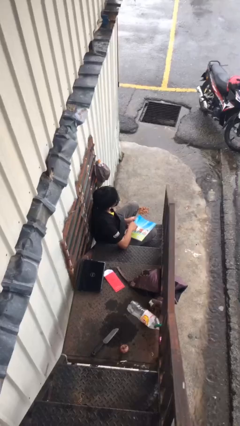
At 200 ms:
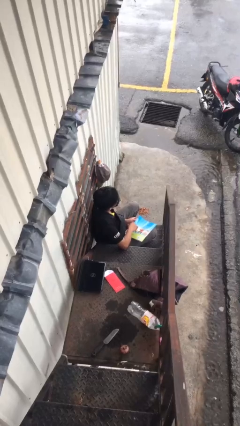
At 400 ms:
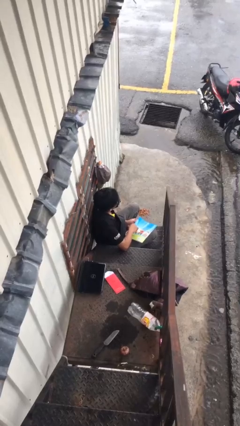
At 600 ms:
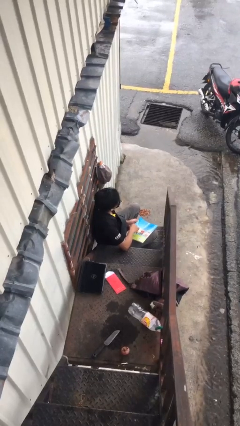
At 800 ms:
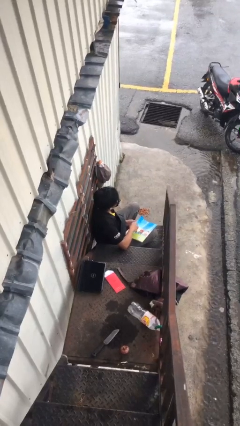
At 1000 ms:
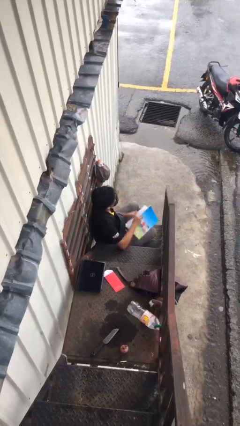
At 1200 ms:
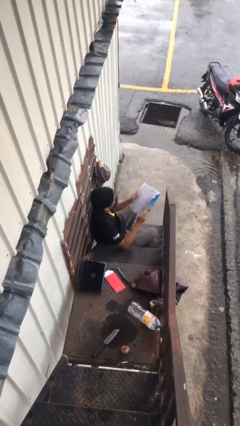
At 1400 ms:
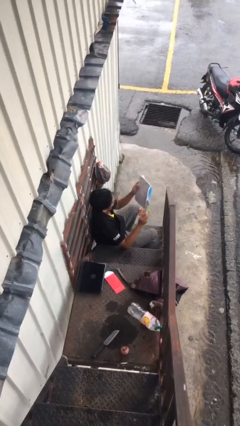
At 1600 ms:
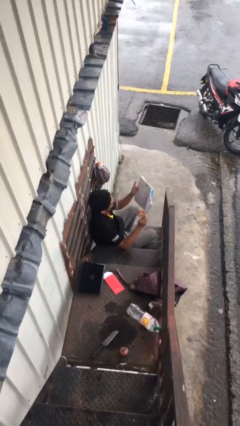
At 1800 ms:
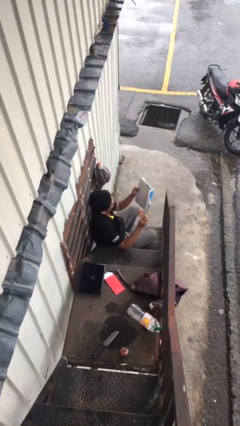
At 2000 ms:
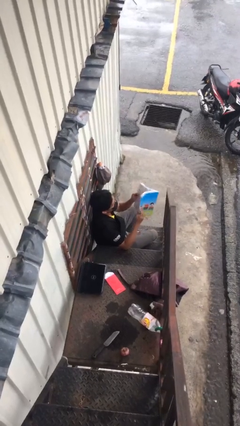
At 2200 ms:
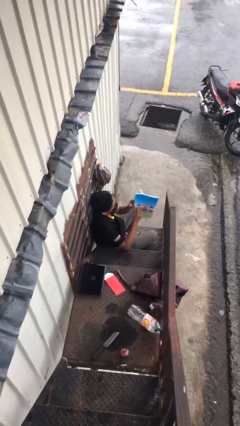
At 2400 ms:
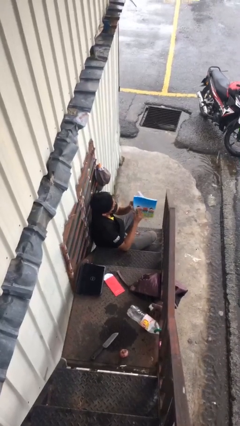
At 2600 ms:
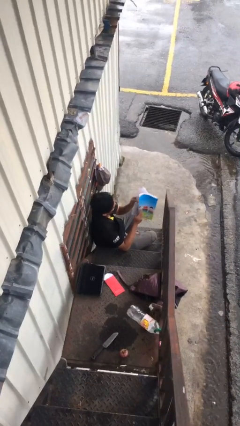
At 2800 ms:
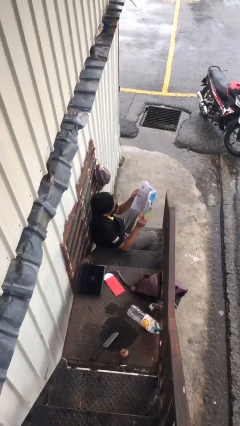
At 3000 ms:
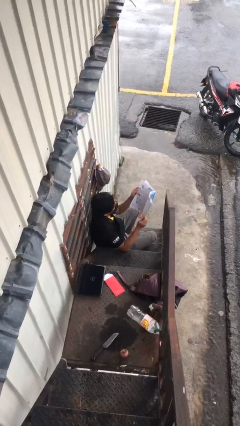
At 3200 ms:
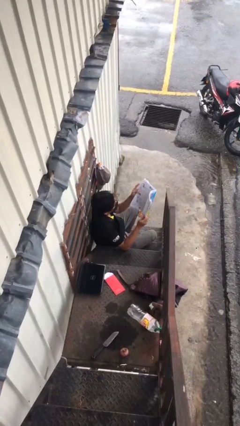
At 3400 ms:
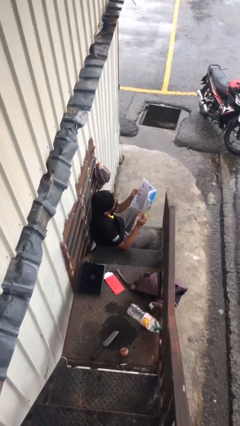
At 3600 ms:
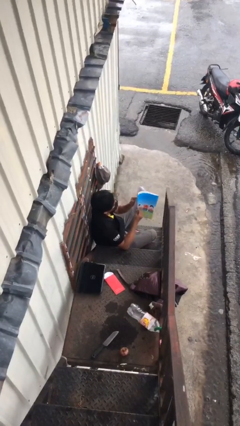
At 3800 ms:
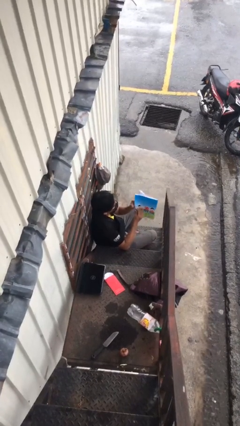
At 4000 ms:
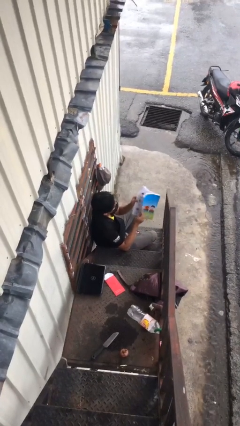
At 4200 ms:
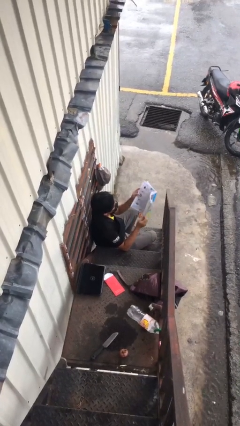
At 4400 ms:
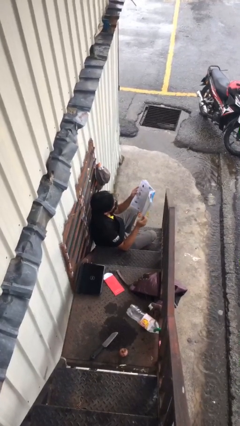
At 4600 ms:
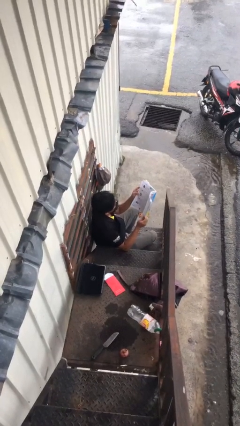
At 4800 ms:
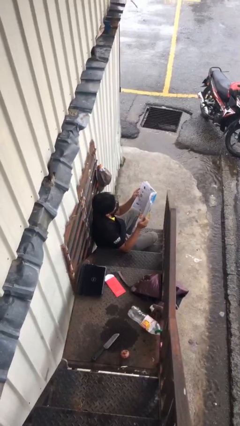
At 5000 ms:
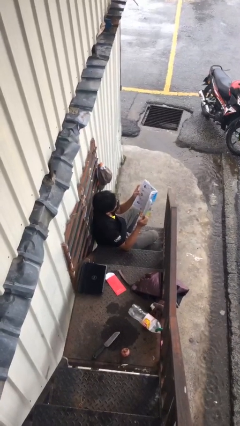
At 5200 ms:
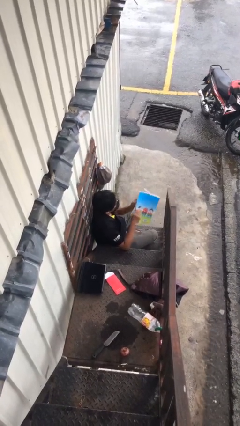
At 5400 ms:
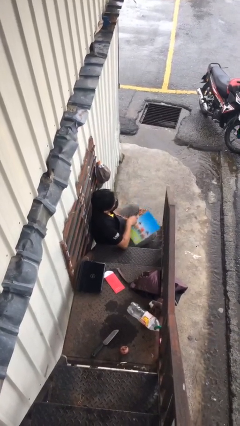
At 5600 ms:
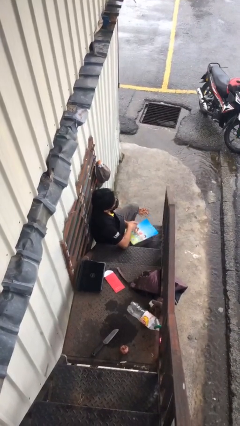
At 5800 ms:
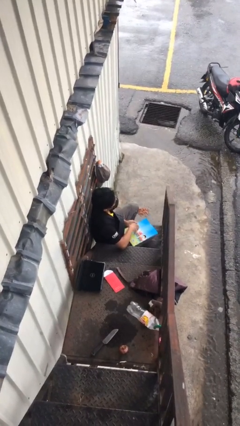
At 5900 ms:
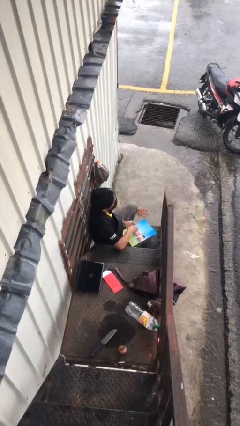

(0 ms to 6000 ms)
person reads document

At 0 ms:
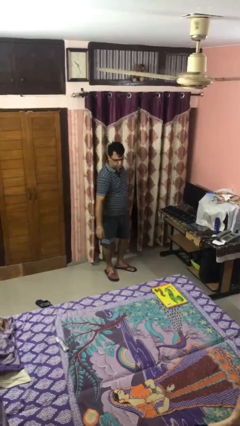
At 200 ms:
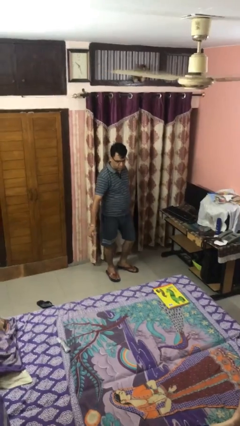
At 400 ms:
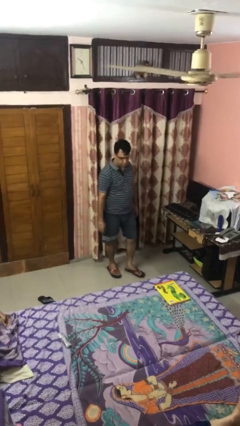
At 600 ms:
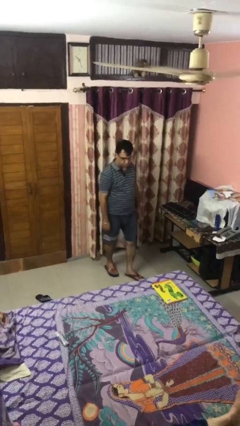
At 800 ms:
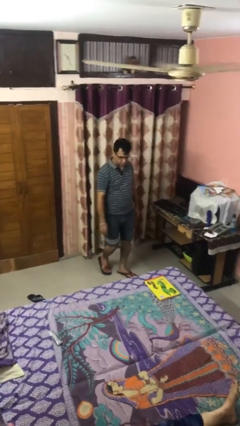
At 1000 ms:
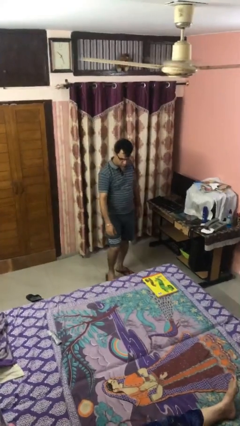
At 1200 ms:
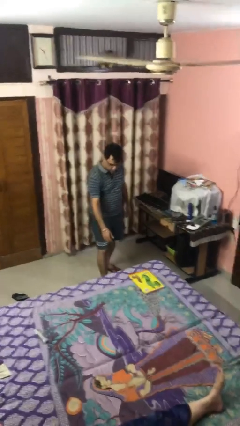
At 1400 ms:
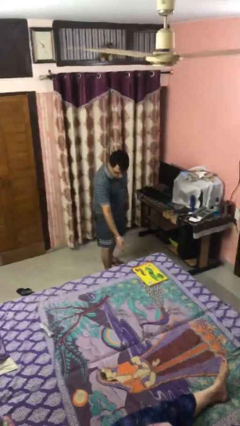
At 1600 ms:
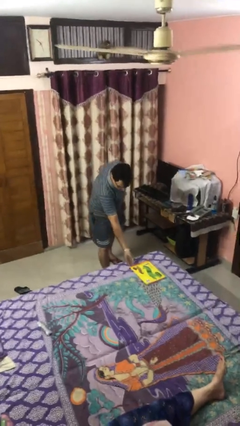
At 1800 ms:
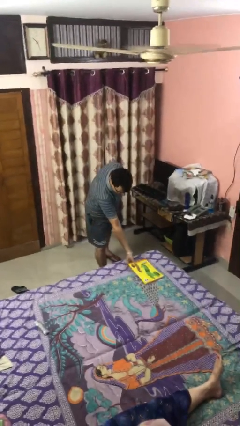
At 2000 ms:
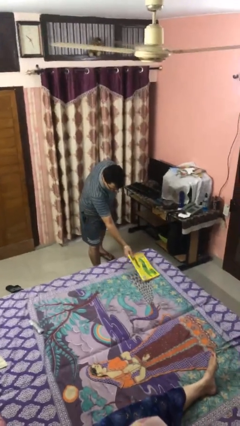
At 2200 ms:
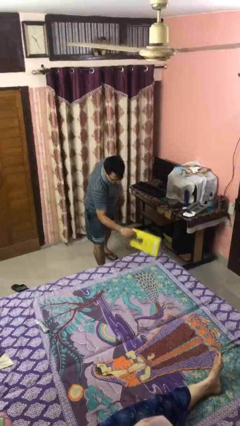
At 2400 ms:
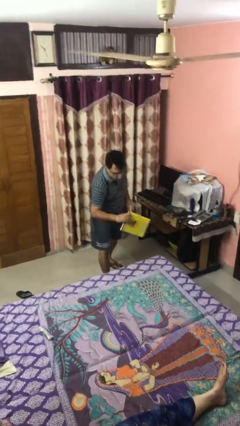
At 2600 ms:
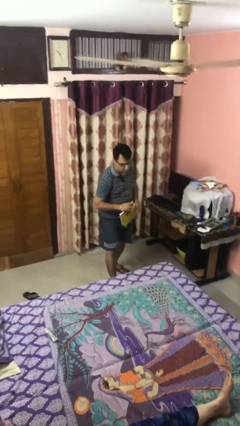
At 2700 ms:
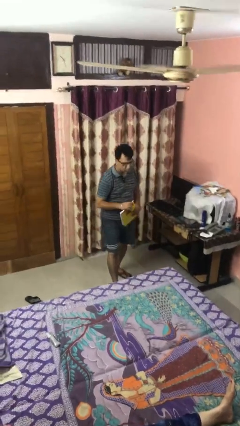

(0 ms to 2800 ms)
person picks up object from bed

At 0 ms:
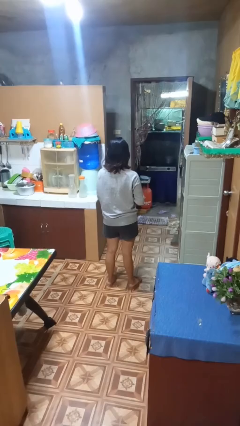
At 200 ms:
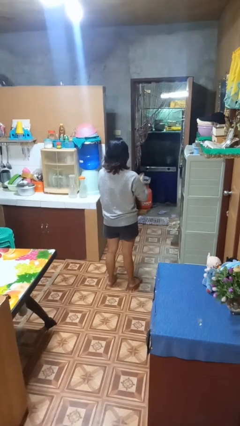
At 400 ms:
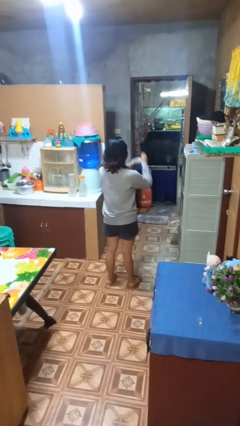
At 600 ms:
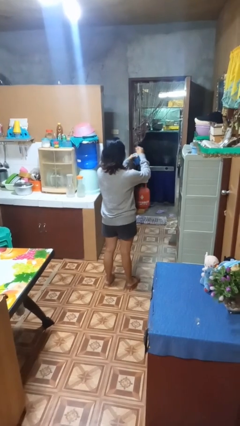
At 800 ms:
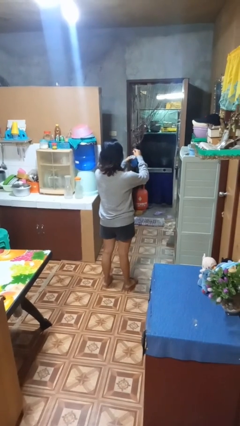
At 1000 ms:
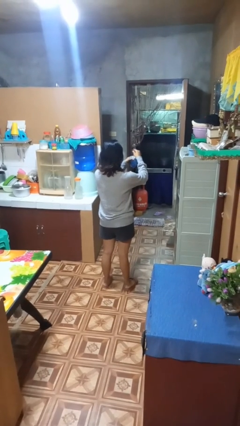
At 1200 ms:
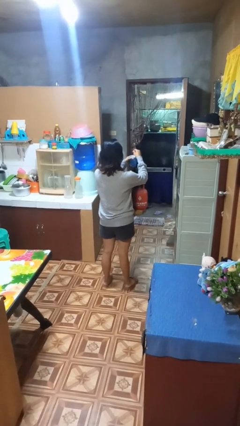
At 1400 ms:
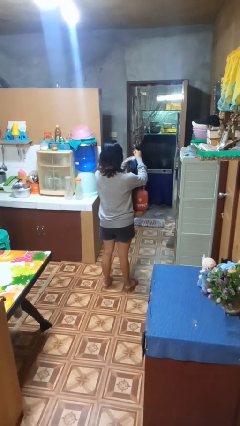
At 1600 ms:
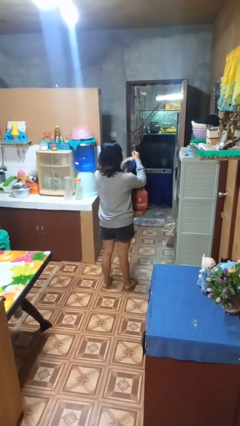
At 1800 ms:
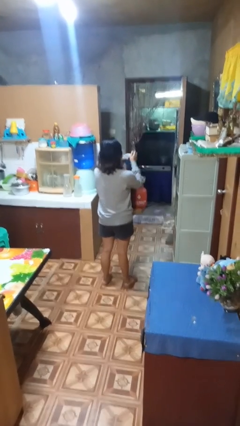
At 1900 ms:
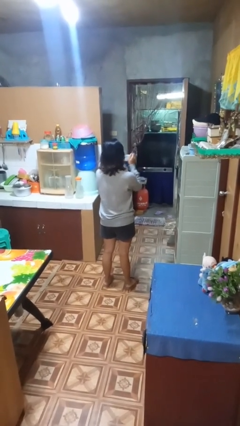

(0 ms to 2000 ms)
person stirs mug

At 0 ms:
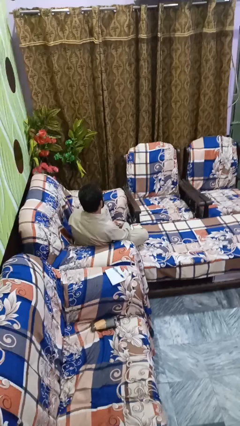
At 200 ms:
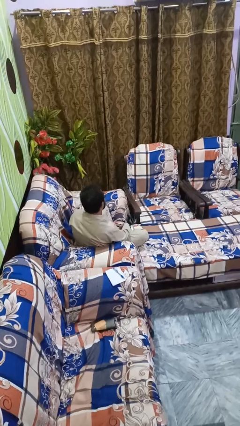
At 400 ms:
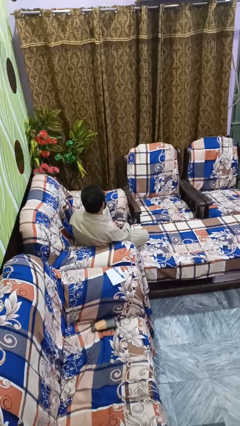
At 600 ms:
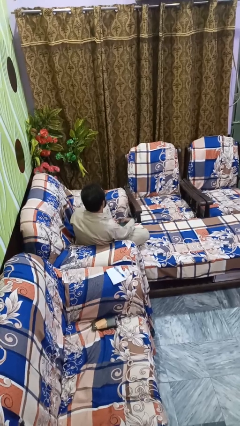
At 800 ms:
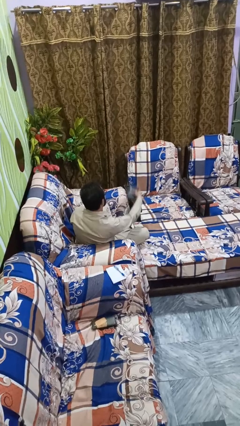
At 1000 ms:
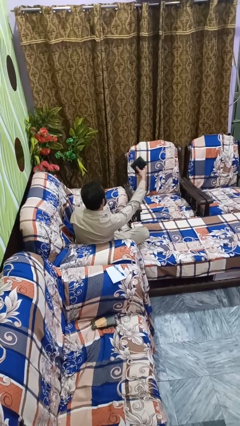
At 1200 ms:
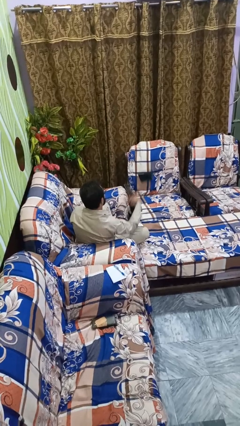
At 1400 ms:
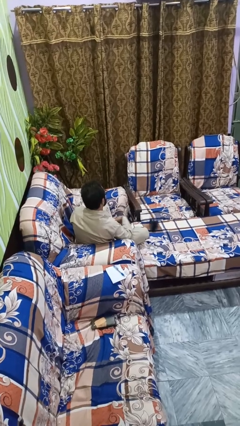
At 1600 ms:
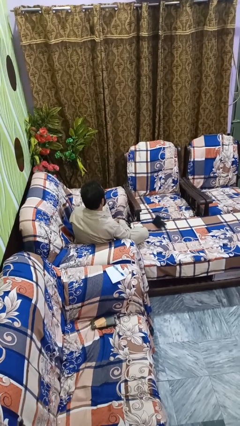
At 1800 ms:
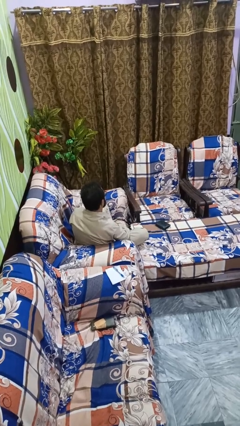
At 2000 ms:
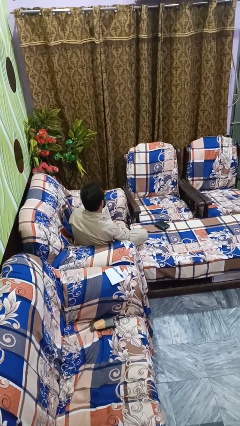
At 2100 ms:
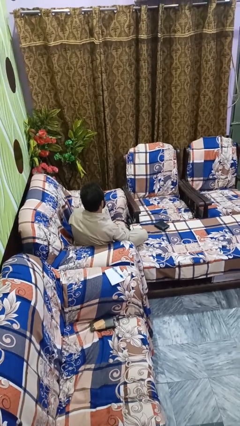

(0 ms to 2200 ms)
person throws object into air

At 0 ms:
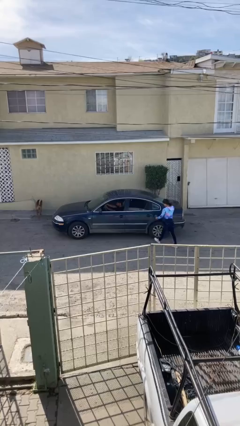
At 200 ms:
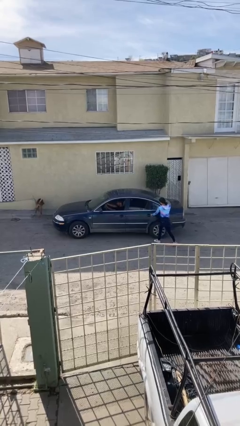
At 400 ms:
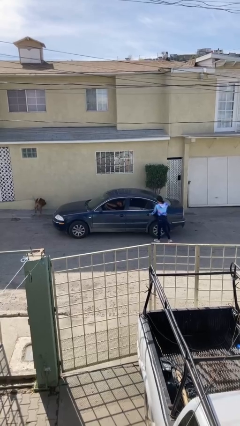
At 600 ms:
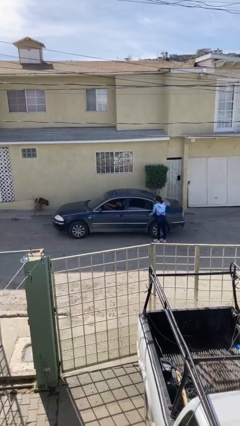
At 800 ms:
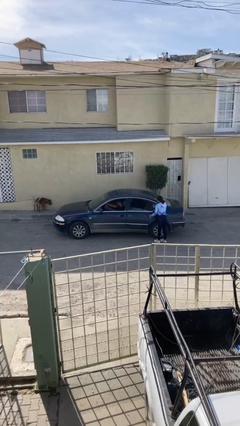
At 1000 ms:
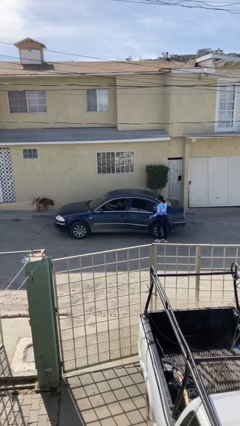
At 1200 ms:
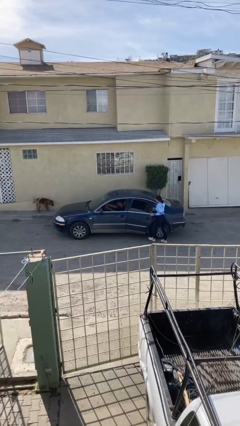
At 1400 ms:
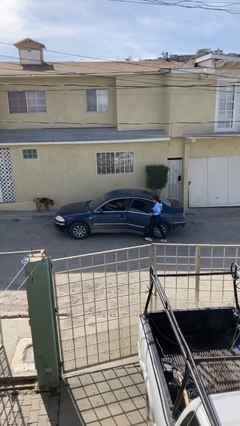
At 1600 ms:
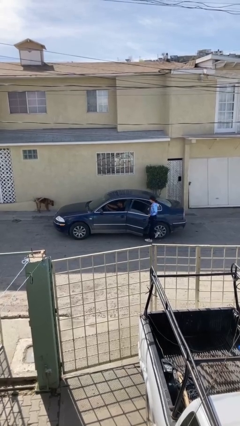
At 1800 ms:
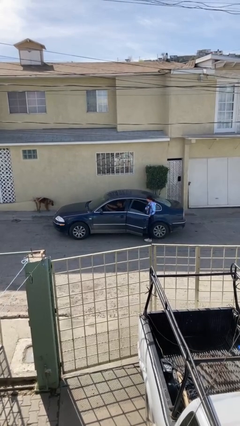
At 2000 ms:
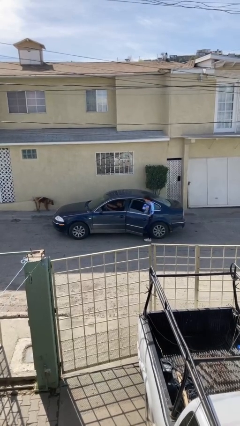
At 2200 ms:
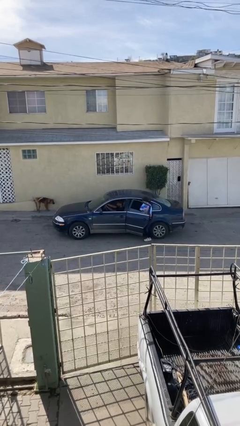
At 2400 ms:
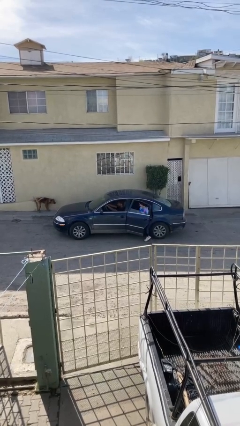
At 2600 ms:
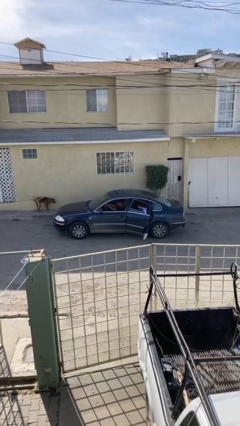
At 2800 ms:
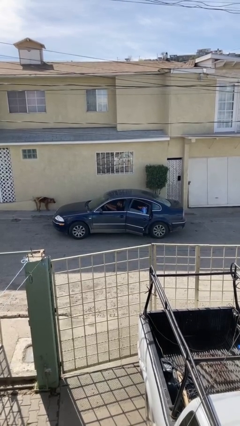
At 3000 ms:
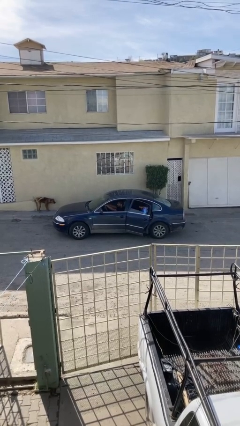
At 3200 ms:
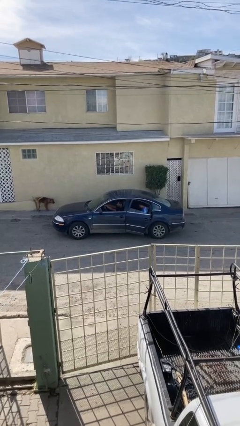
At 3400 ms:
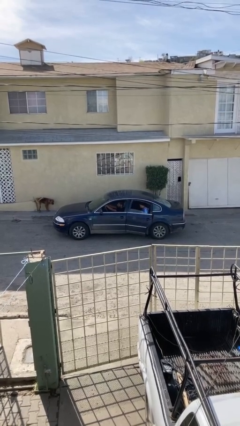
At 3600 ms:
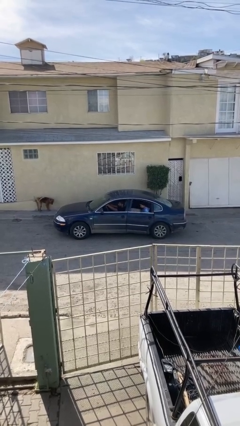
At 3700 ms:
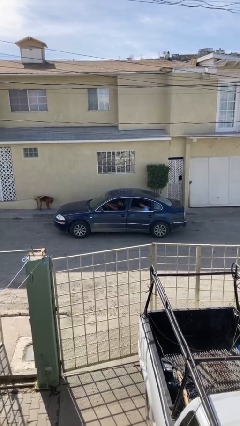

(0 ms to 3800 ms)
car picks up person

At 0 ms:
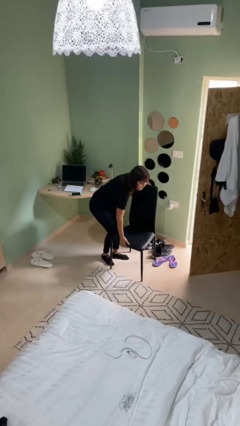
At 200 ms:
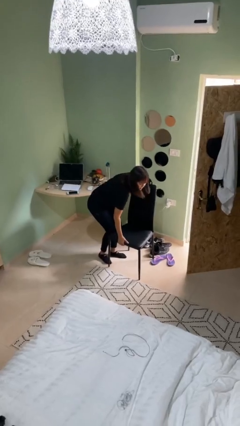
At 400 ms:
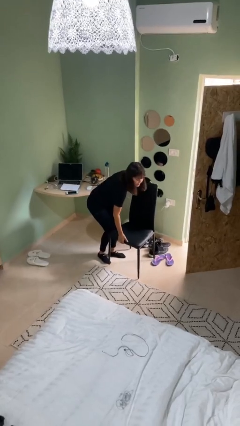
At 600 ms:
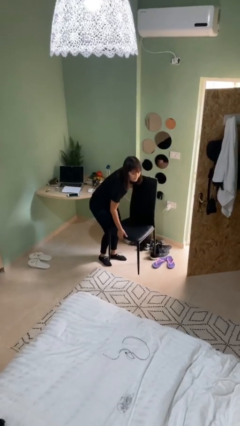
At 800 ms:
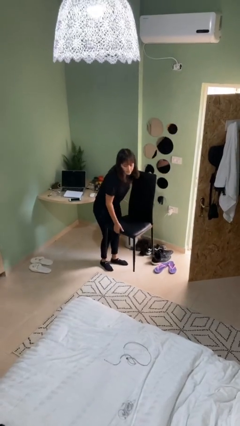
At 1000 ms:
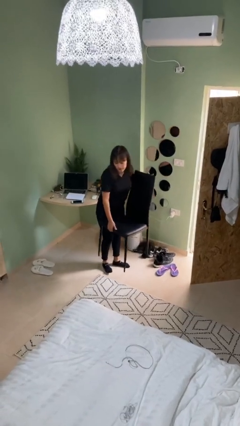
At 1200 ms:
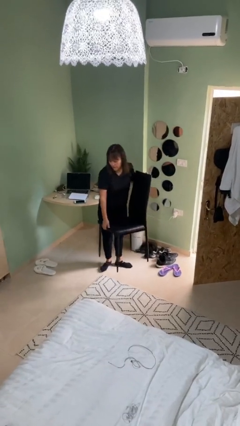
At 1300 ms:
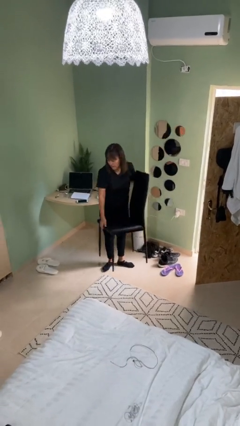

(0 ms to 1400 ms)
person picks up object from floor
